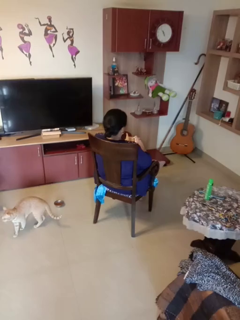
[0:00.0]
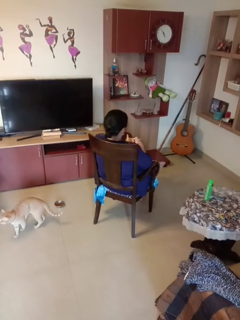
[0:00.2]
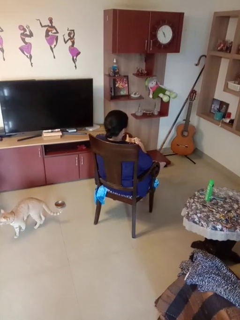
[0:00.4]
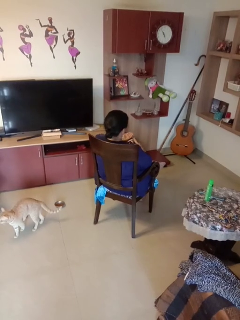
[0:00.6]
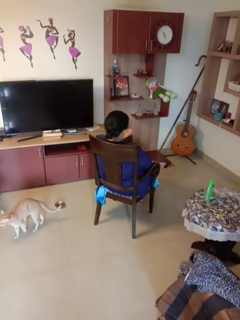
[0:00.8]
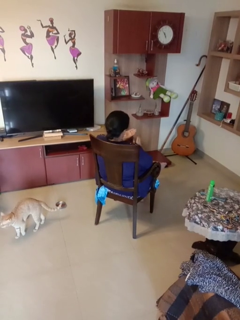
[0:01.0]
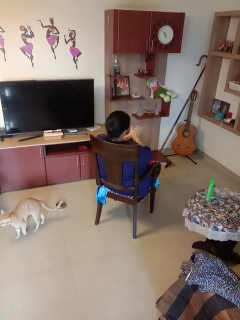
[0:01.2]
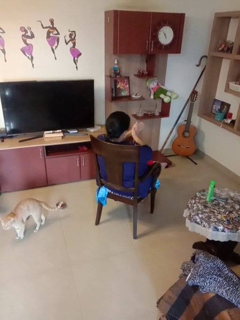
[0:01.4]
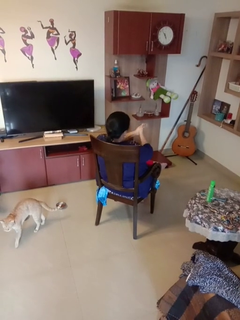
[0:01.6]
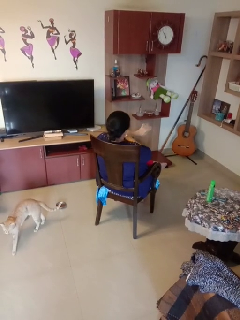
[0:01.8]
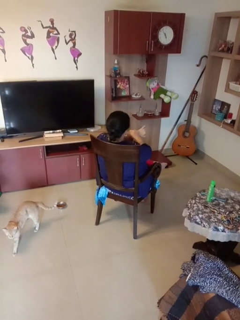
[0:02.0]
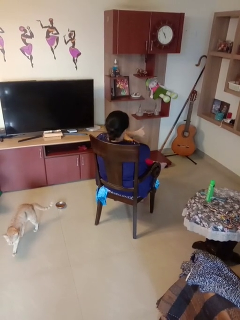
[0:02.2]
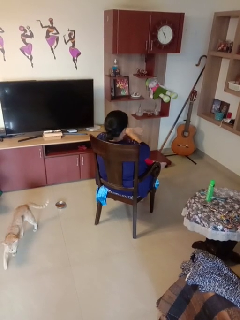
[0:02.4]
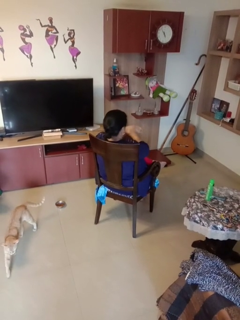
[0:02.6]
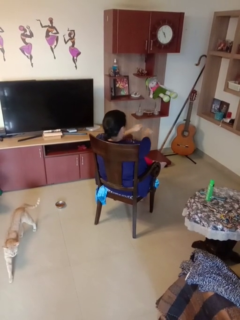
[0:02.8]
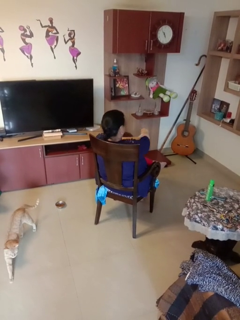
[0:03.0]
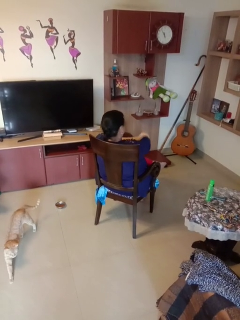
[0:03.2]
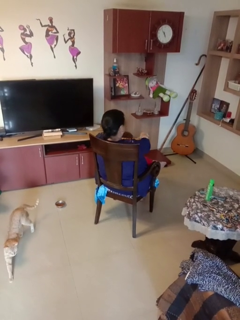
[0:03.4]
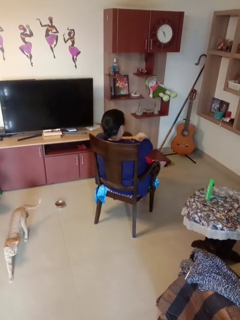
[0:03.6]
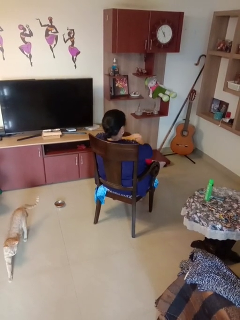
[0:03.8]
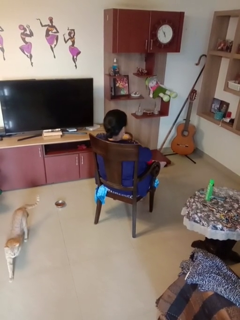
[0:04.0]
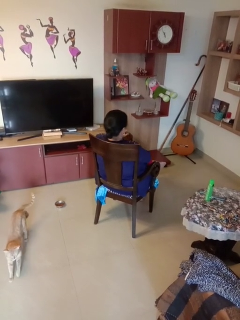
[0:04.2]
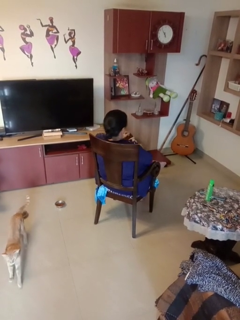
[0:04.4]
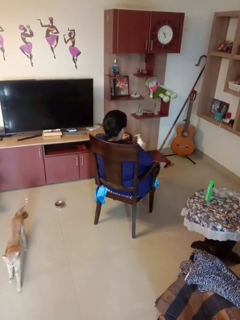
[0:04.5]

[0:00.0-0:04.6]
person applies sunscreen

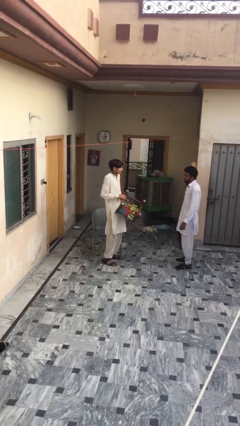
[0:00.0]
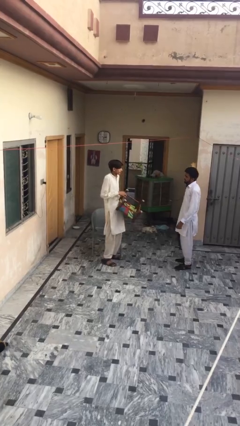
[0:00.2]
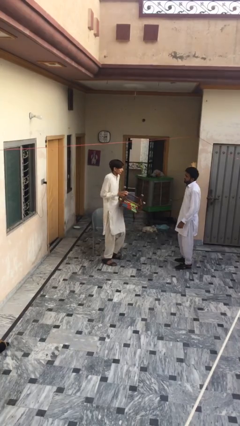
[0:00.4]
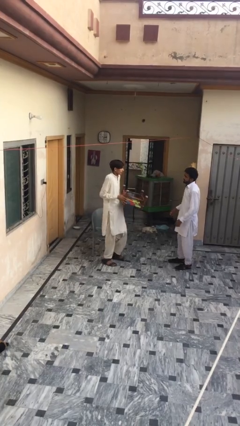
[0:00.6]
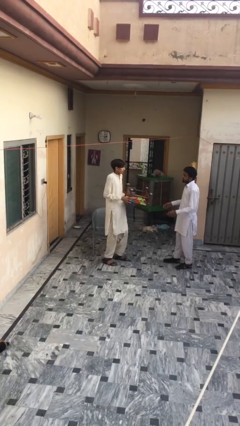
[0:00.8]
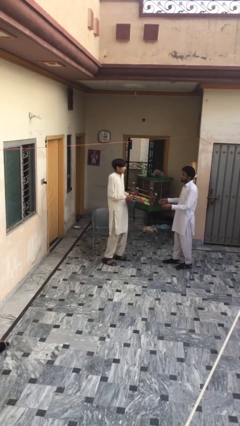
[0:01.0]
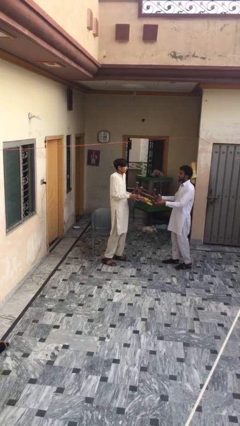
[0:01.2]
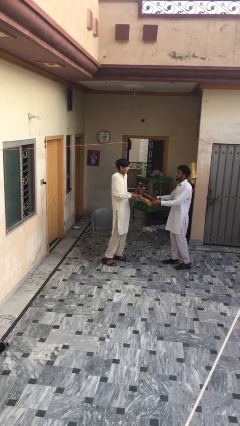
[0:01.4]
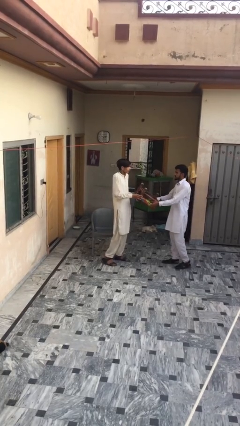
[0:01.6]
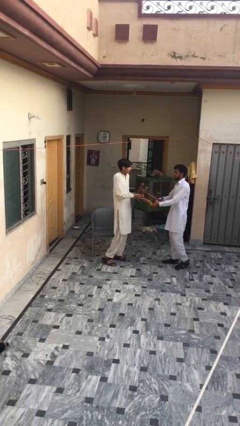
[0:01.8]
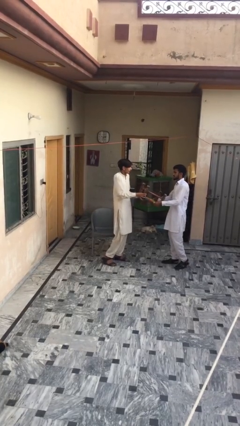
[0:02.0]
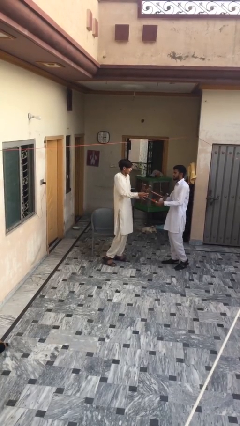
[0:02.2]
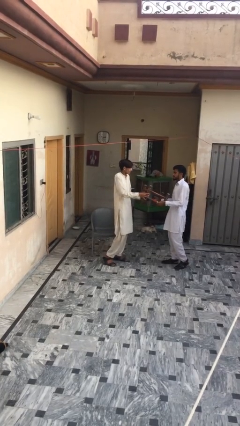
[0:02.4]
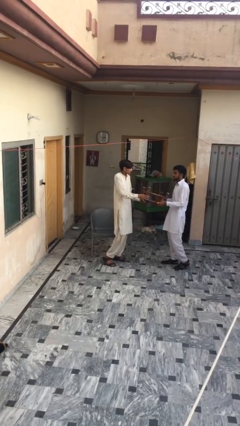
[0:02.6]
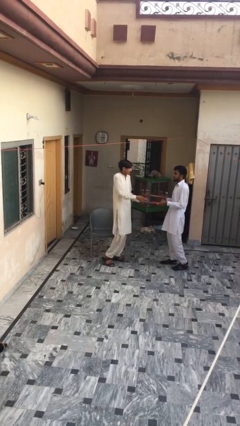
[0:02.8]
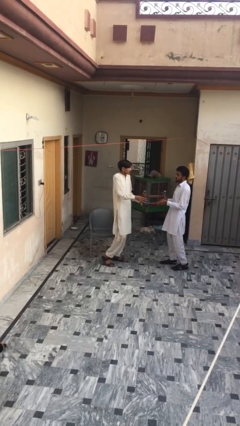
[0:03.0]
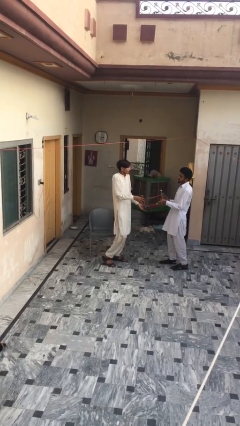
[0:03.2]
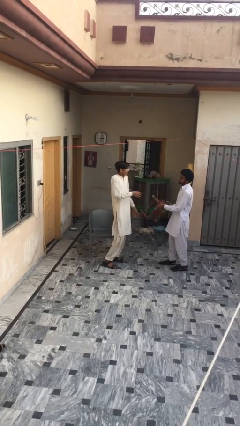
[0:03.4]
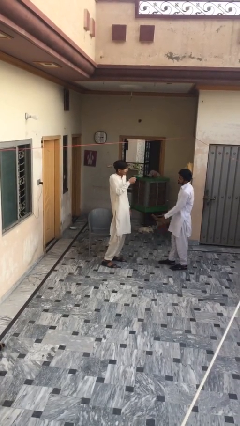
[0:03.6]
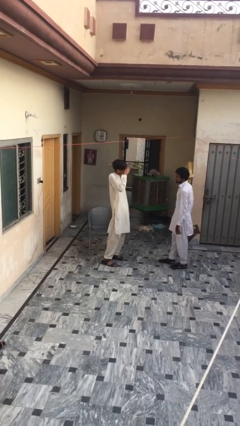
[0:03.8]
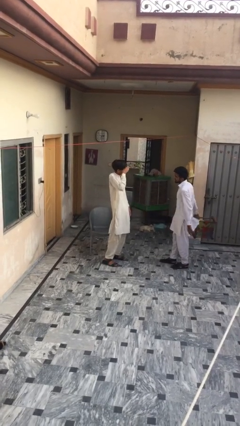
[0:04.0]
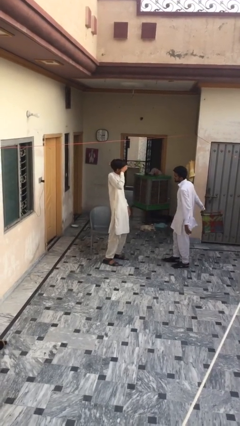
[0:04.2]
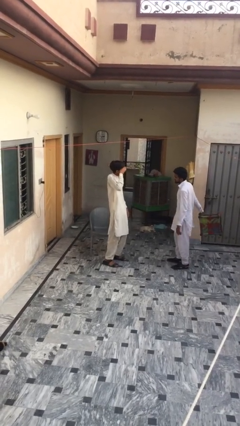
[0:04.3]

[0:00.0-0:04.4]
person transfers object to person

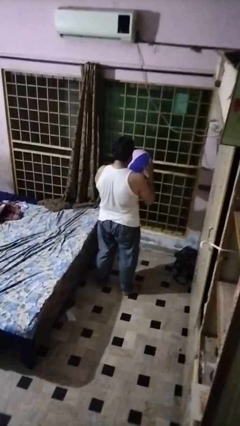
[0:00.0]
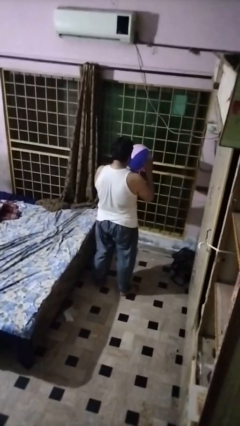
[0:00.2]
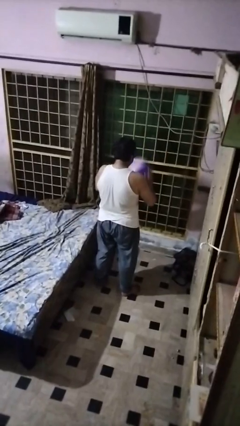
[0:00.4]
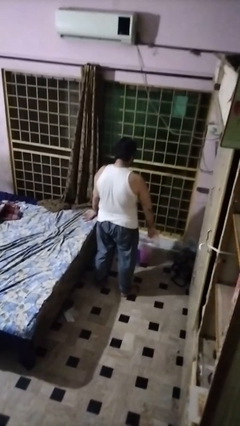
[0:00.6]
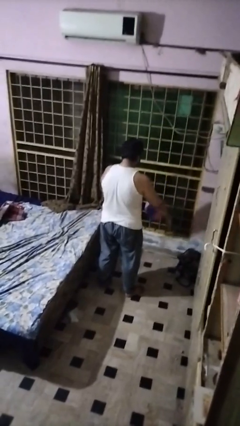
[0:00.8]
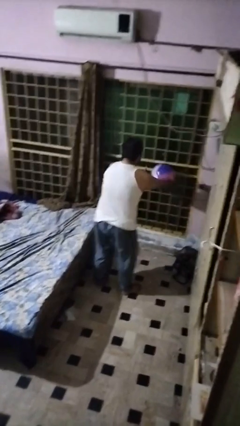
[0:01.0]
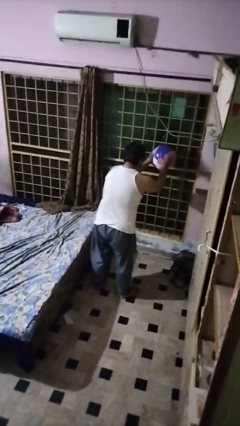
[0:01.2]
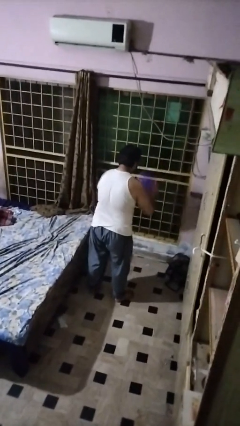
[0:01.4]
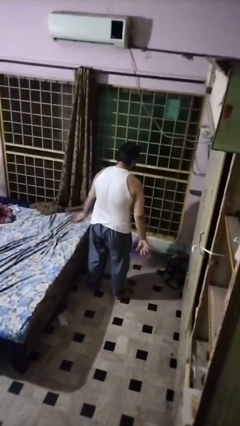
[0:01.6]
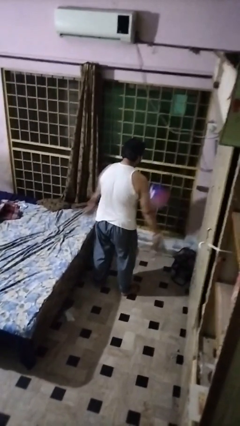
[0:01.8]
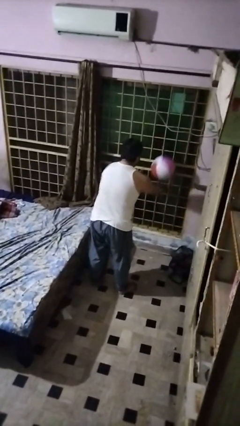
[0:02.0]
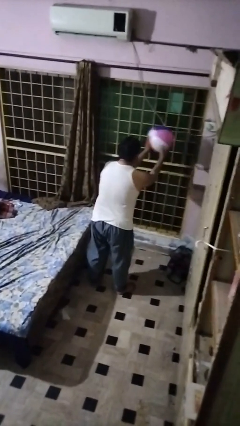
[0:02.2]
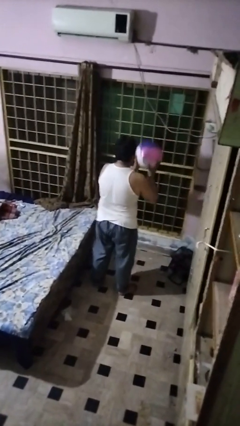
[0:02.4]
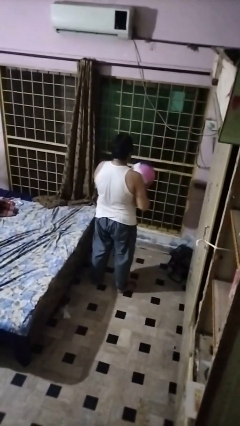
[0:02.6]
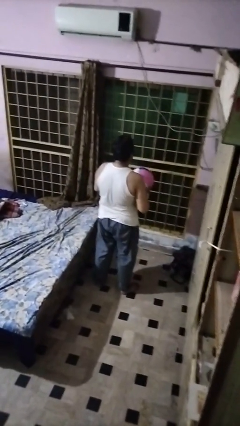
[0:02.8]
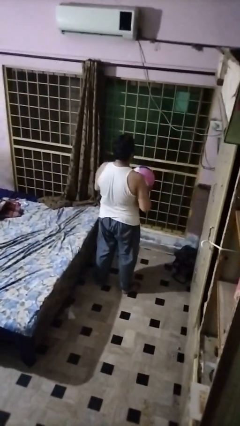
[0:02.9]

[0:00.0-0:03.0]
person bounces ball on floor

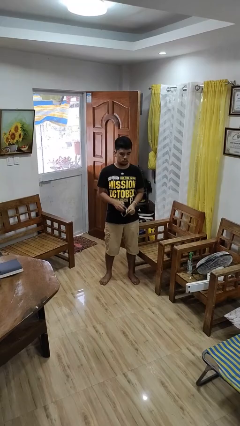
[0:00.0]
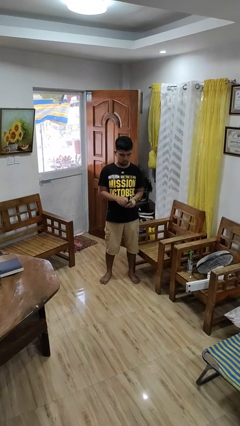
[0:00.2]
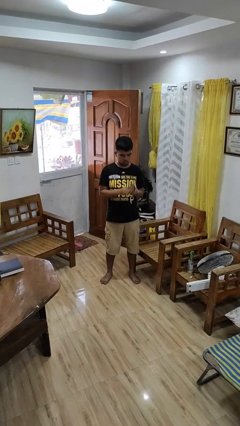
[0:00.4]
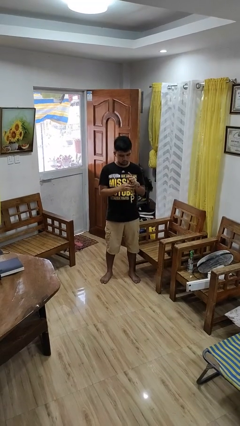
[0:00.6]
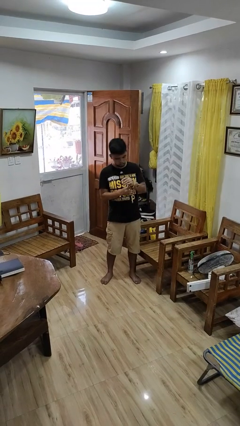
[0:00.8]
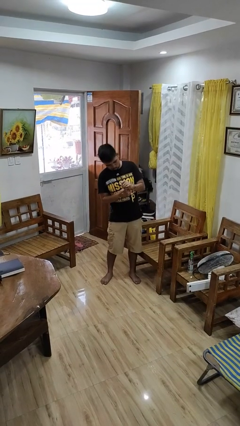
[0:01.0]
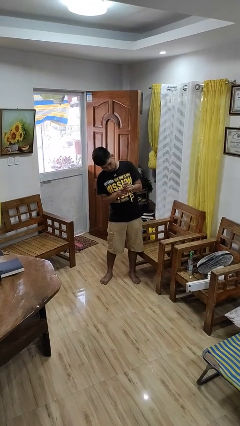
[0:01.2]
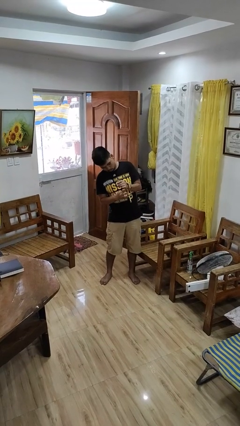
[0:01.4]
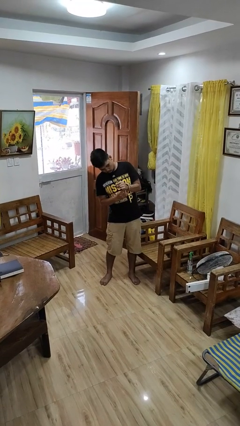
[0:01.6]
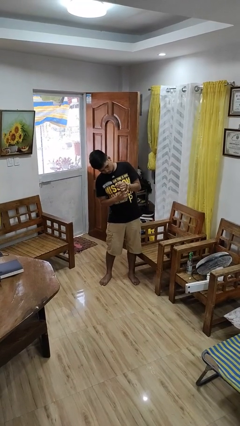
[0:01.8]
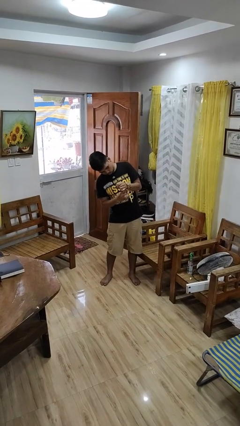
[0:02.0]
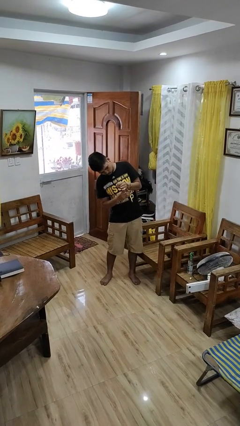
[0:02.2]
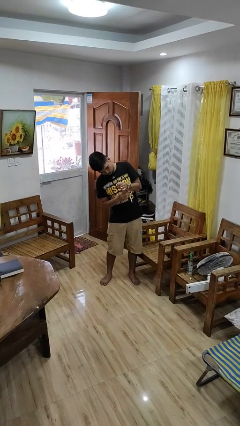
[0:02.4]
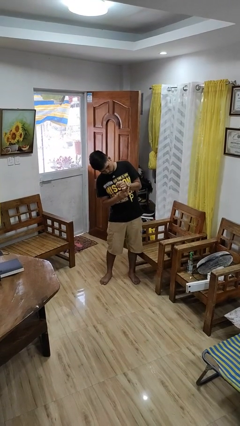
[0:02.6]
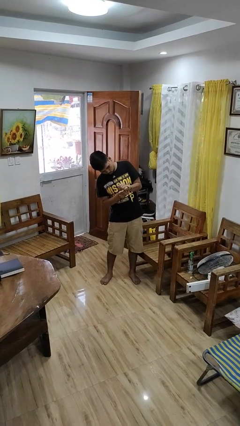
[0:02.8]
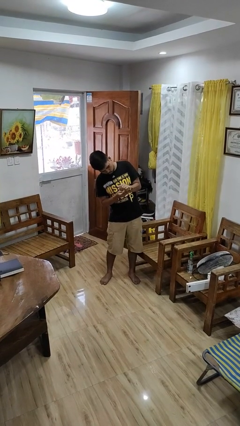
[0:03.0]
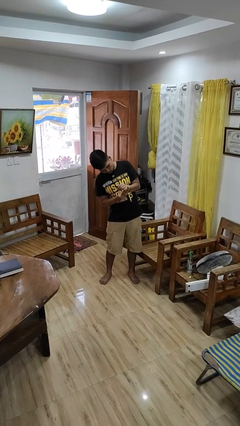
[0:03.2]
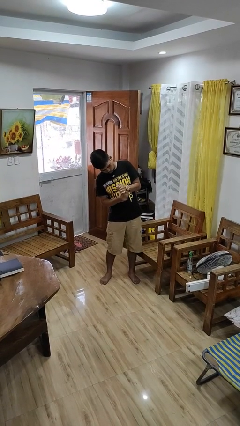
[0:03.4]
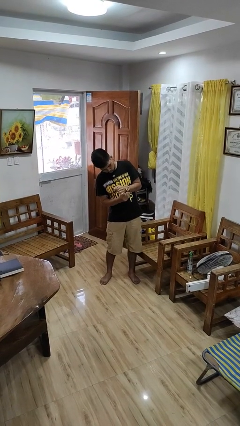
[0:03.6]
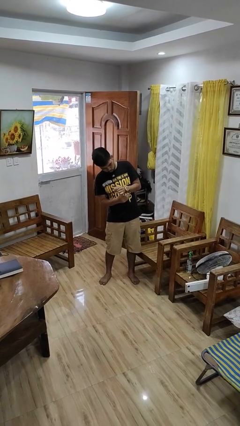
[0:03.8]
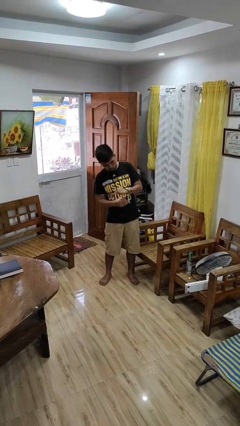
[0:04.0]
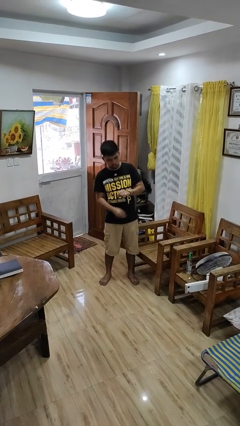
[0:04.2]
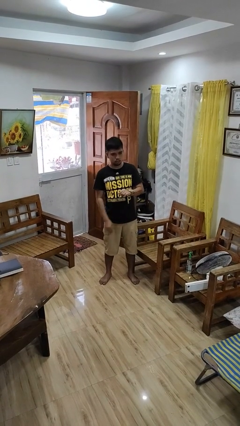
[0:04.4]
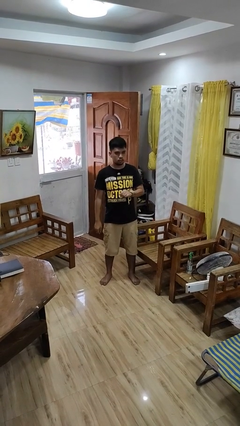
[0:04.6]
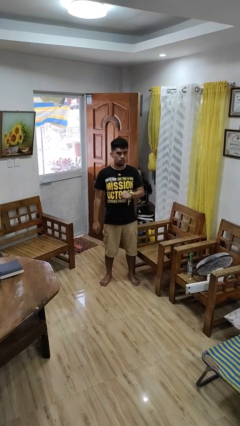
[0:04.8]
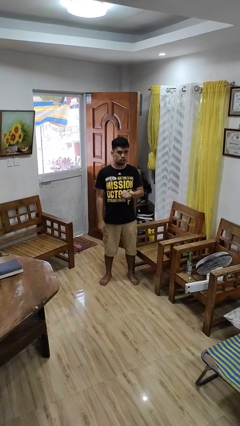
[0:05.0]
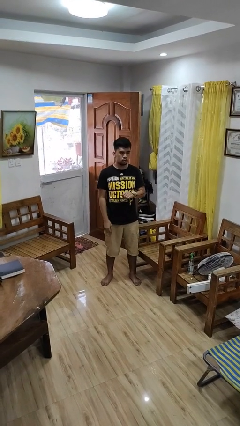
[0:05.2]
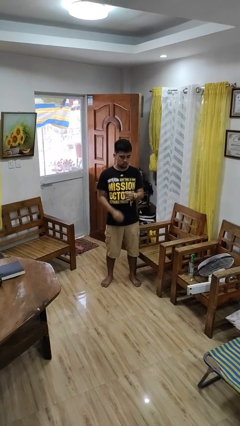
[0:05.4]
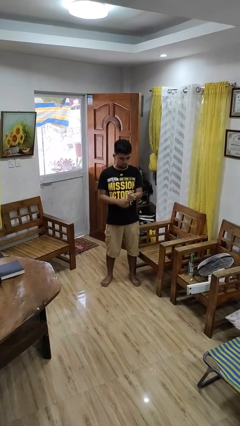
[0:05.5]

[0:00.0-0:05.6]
person puts on wristwatch

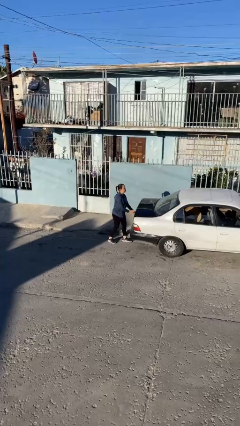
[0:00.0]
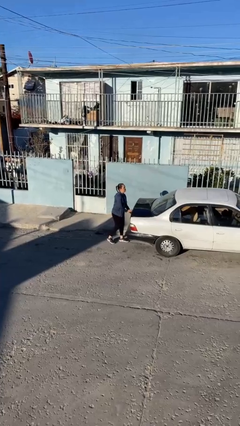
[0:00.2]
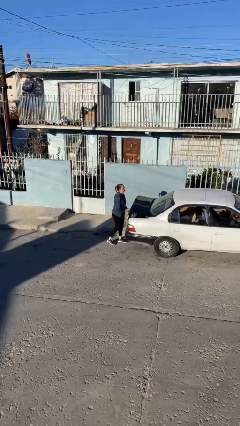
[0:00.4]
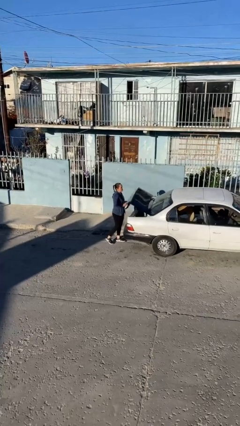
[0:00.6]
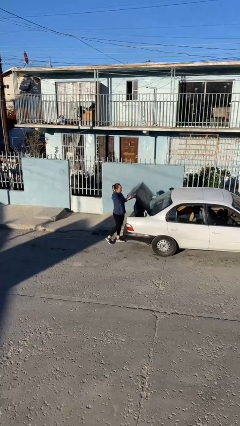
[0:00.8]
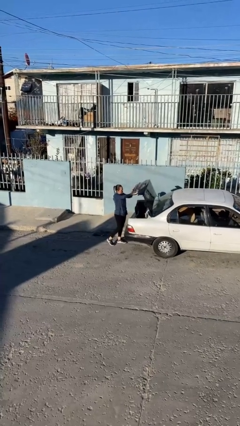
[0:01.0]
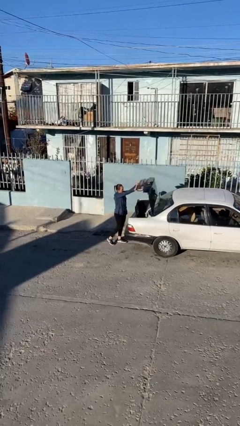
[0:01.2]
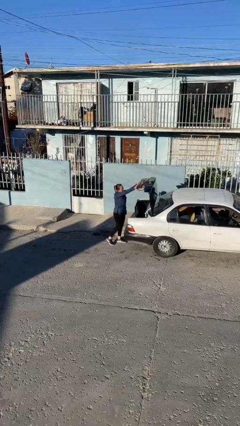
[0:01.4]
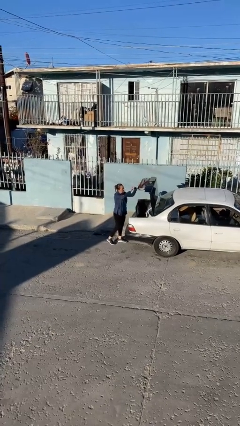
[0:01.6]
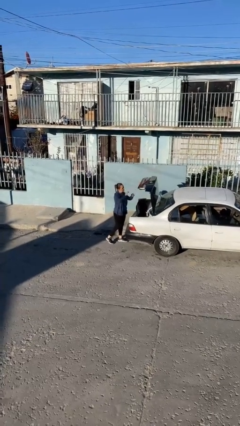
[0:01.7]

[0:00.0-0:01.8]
person opens car trunk
